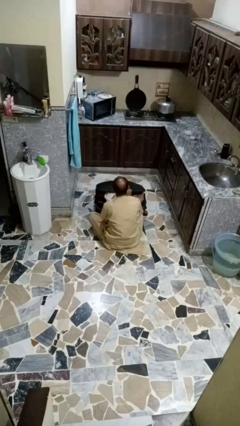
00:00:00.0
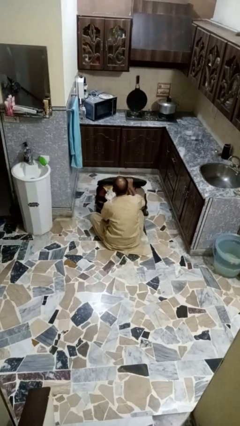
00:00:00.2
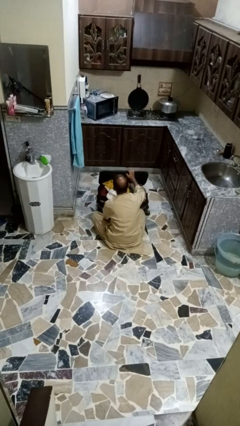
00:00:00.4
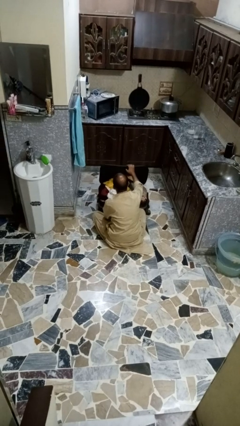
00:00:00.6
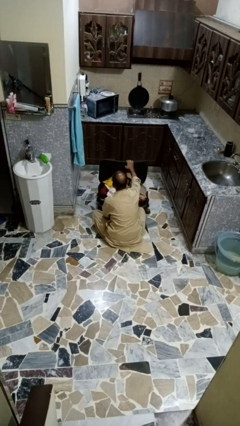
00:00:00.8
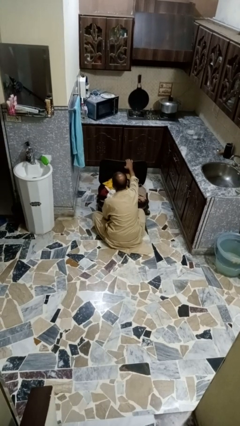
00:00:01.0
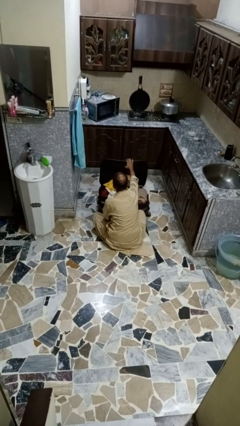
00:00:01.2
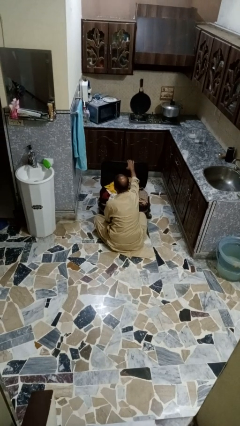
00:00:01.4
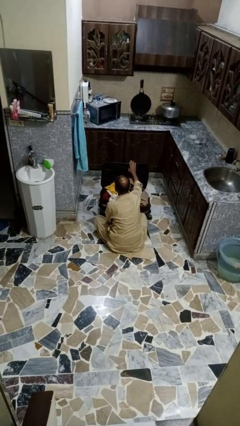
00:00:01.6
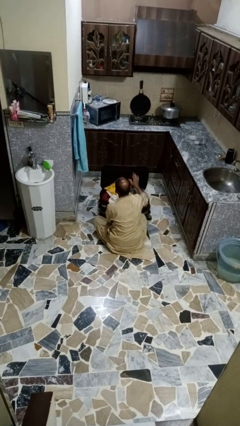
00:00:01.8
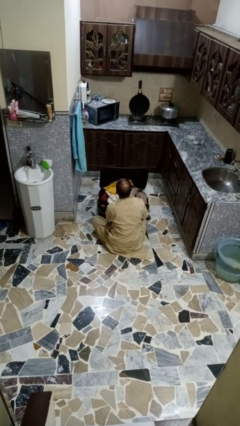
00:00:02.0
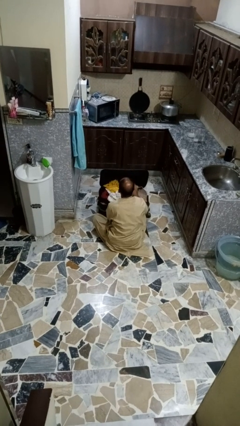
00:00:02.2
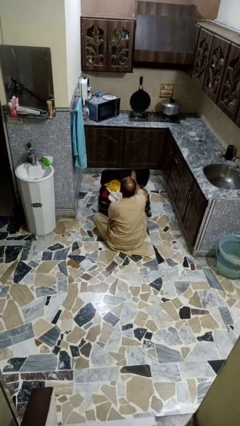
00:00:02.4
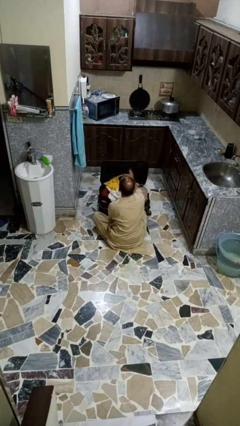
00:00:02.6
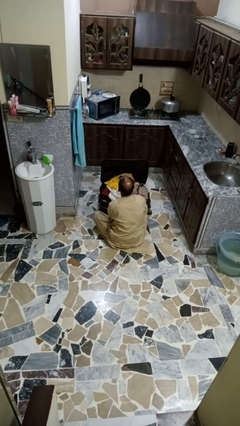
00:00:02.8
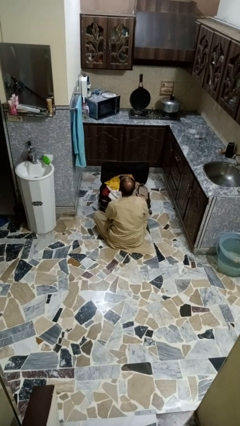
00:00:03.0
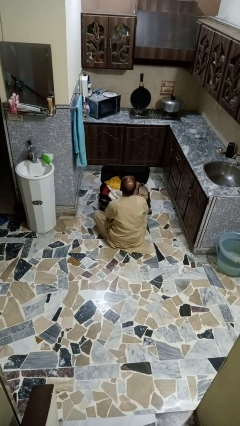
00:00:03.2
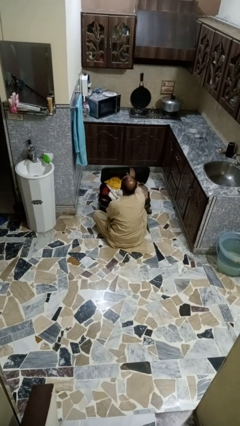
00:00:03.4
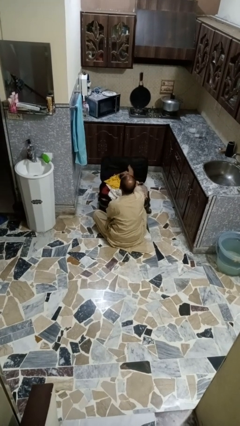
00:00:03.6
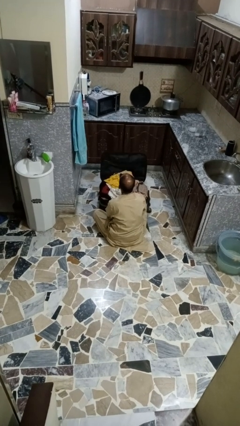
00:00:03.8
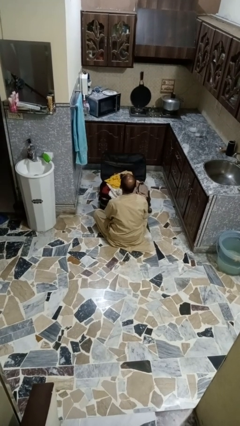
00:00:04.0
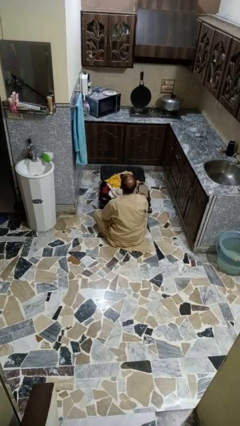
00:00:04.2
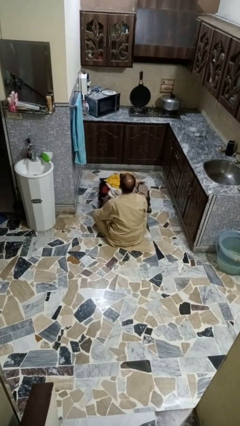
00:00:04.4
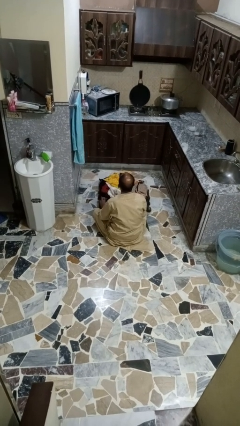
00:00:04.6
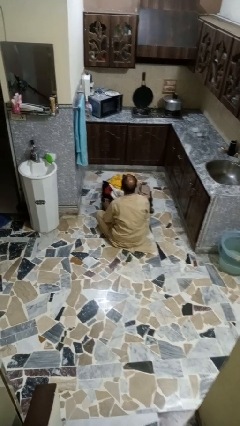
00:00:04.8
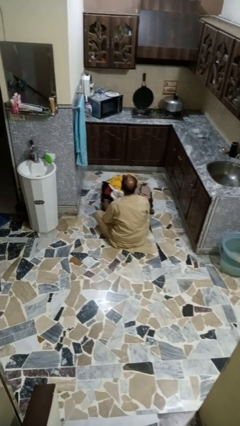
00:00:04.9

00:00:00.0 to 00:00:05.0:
person opens suitcase

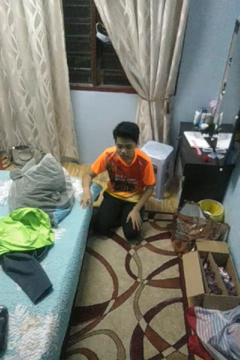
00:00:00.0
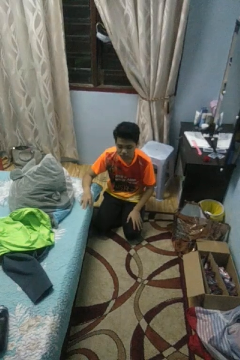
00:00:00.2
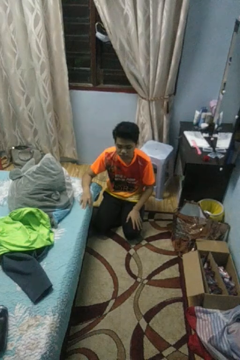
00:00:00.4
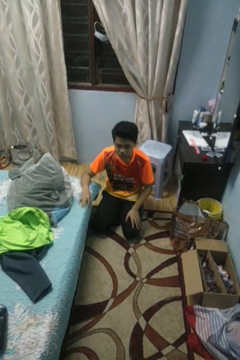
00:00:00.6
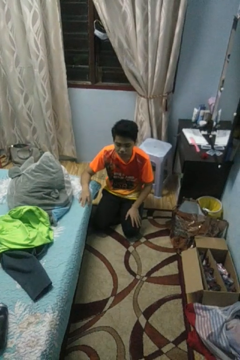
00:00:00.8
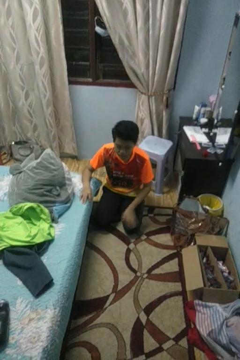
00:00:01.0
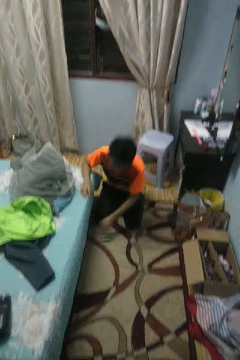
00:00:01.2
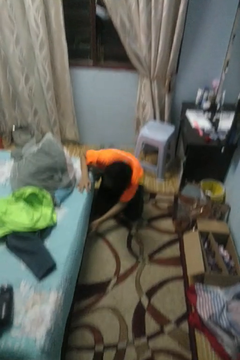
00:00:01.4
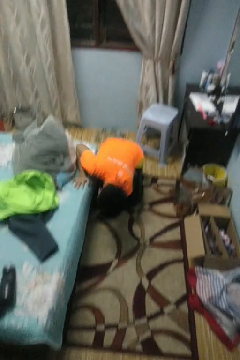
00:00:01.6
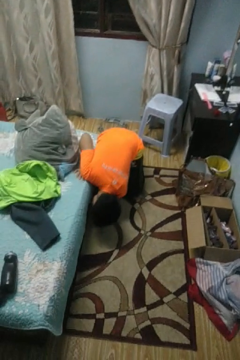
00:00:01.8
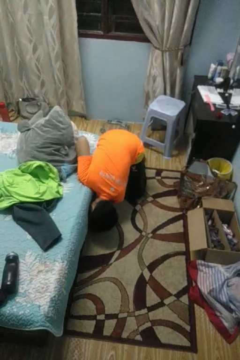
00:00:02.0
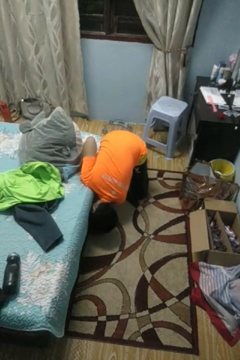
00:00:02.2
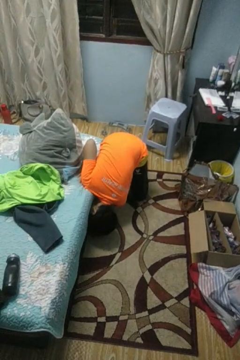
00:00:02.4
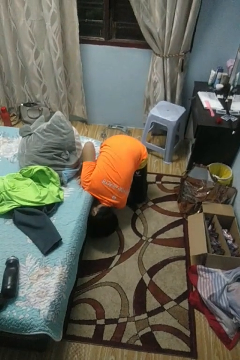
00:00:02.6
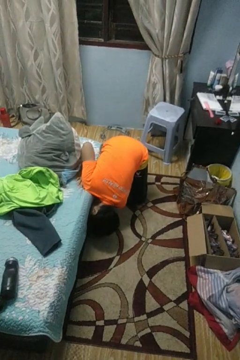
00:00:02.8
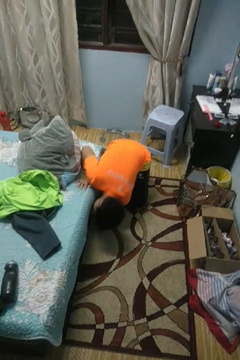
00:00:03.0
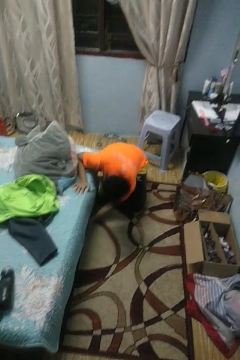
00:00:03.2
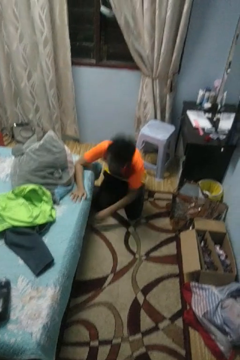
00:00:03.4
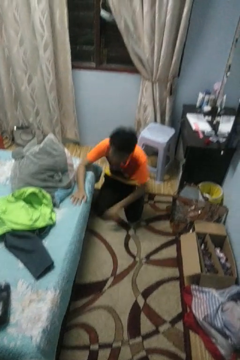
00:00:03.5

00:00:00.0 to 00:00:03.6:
person searches under bed

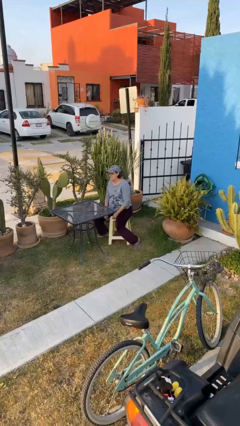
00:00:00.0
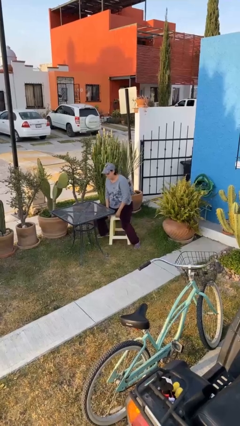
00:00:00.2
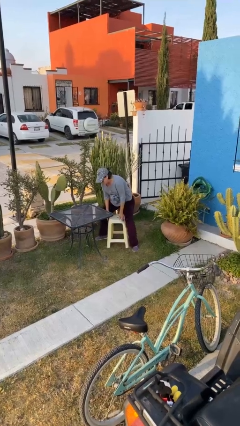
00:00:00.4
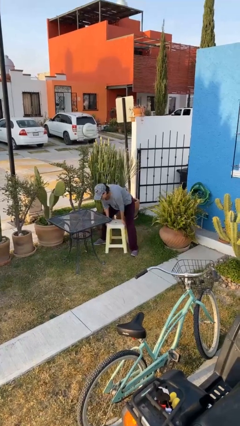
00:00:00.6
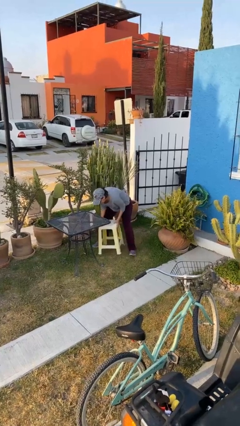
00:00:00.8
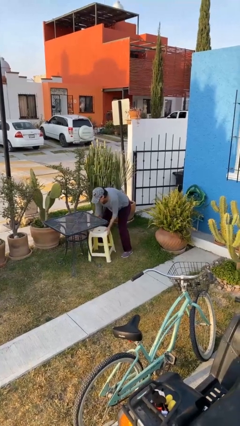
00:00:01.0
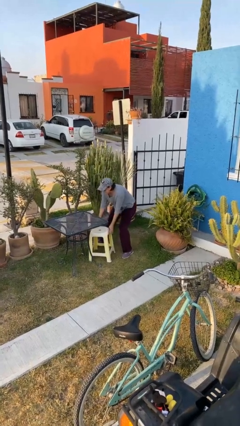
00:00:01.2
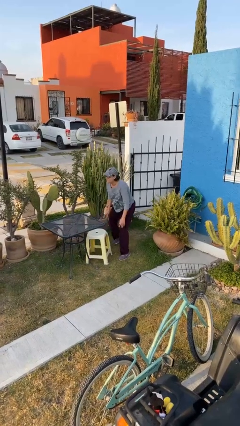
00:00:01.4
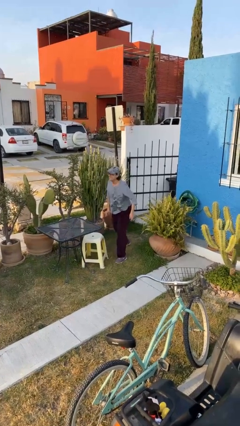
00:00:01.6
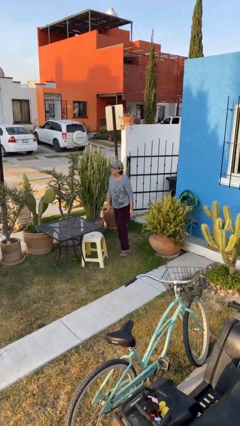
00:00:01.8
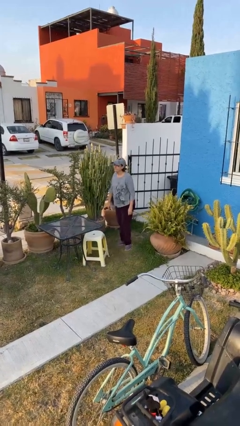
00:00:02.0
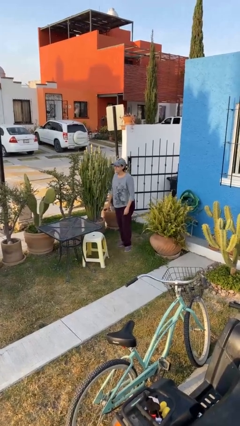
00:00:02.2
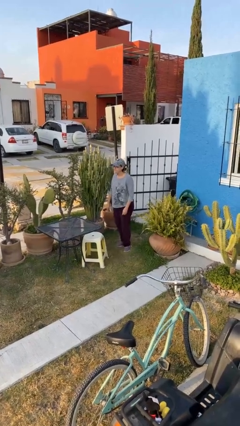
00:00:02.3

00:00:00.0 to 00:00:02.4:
person stands up

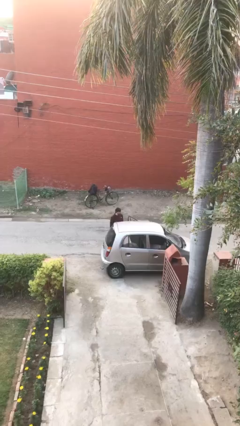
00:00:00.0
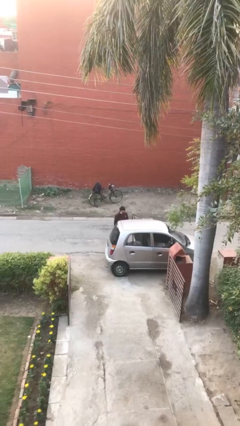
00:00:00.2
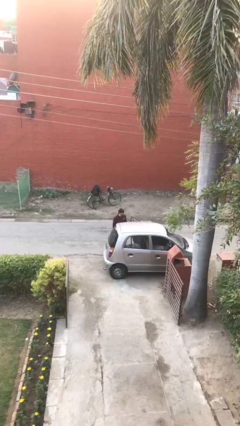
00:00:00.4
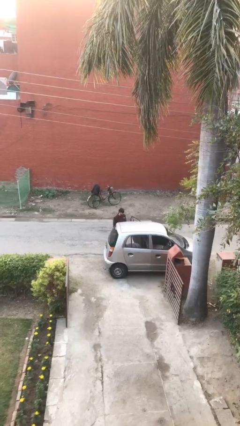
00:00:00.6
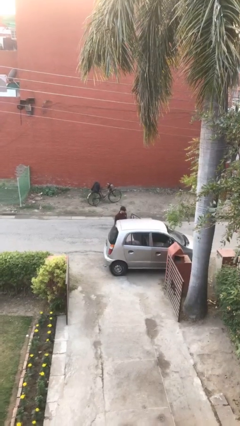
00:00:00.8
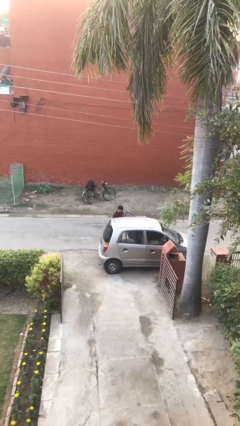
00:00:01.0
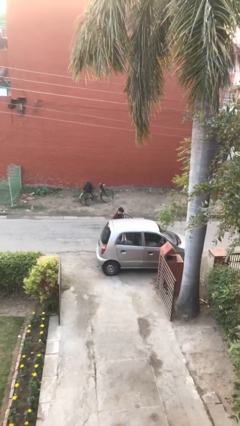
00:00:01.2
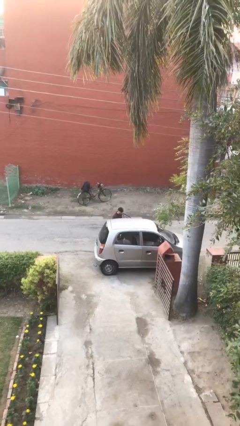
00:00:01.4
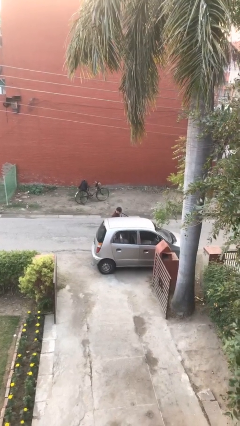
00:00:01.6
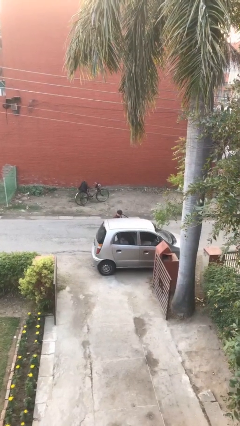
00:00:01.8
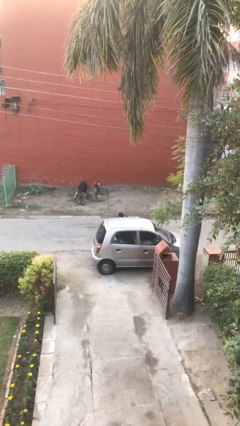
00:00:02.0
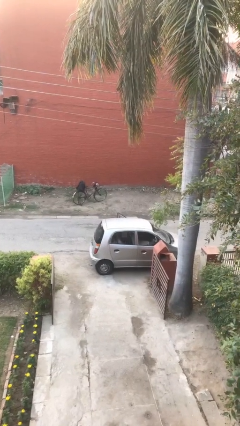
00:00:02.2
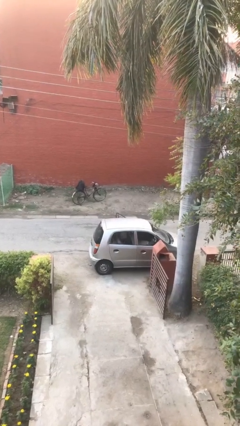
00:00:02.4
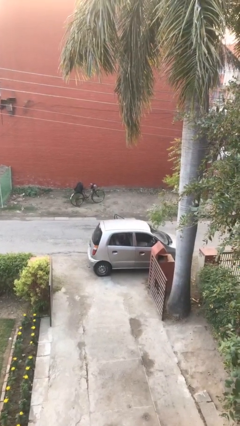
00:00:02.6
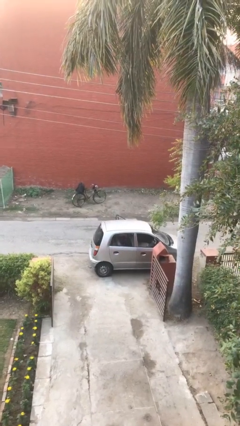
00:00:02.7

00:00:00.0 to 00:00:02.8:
person enters car

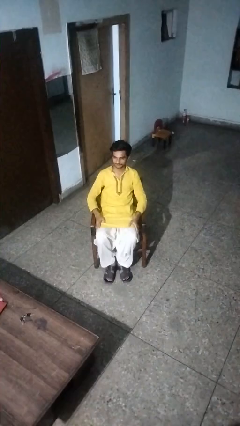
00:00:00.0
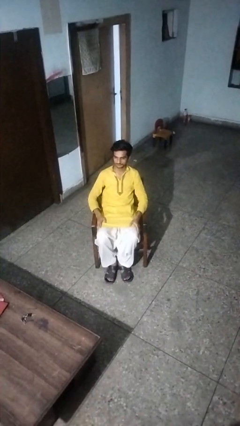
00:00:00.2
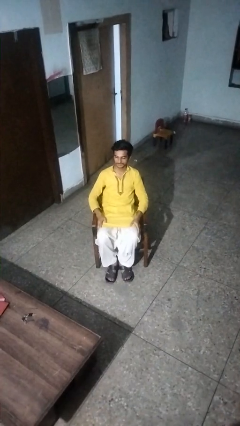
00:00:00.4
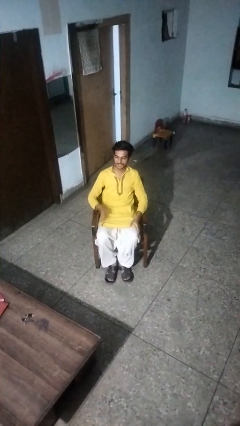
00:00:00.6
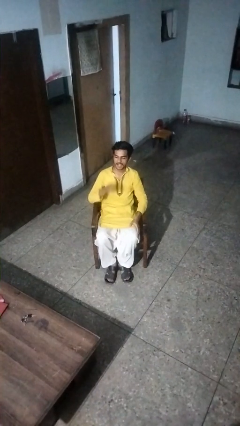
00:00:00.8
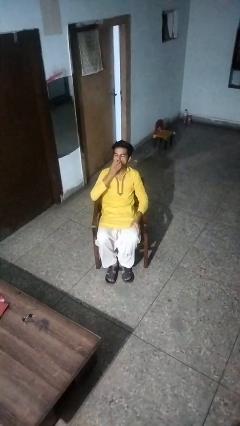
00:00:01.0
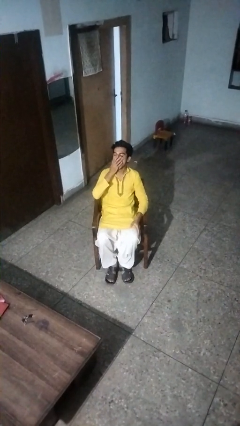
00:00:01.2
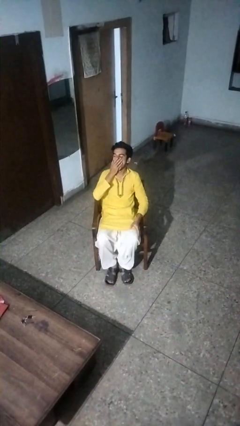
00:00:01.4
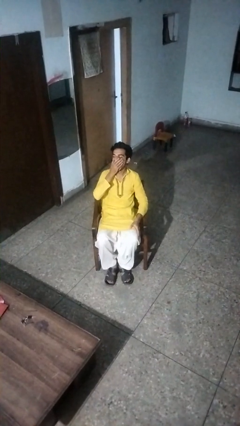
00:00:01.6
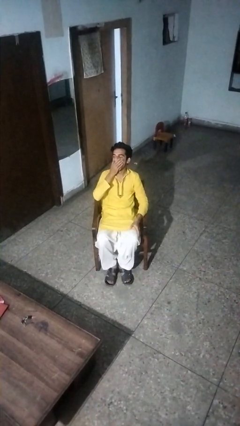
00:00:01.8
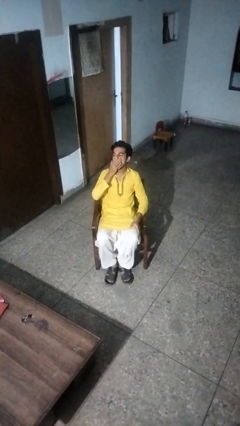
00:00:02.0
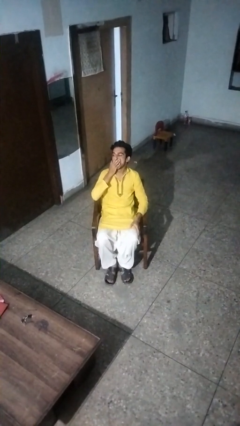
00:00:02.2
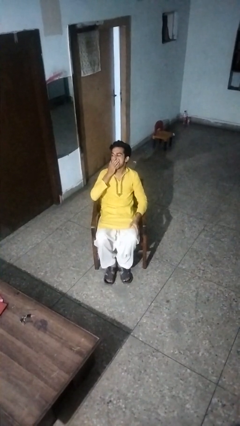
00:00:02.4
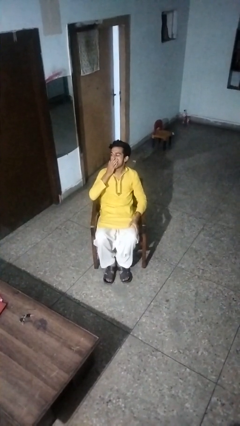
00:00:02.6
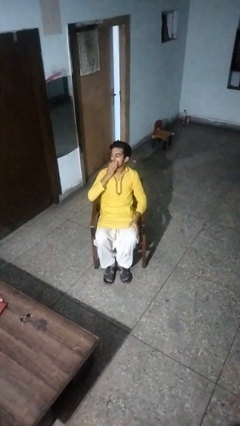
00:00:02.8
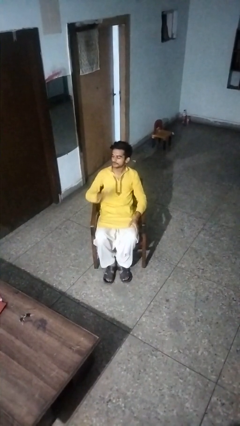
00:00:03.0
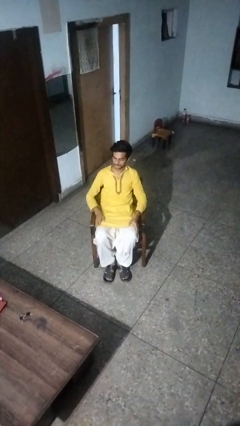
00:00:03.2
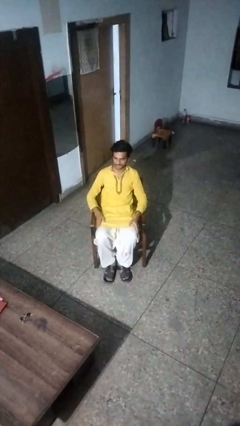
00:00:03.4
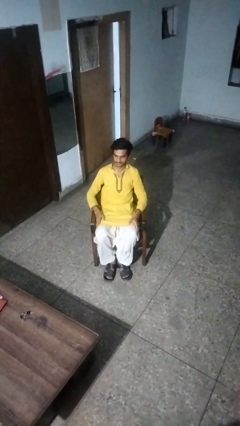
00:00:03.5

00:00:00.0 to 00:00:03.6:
person yawns

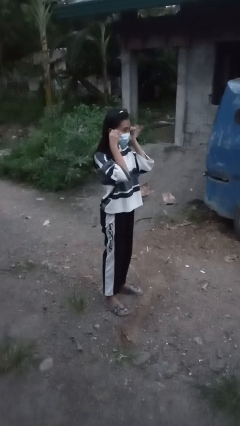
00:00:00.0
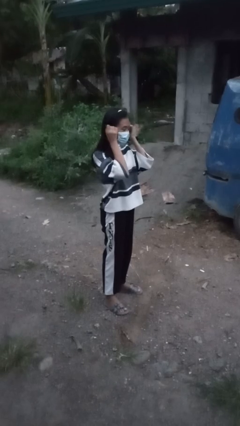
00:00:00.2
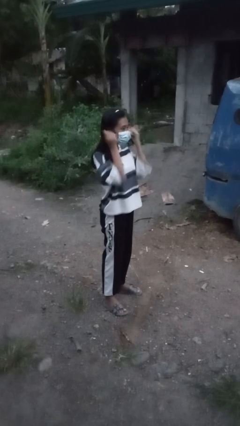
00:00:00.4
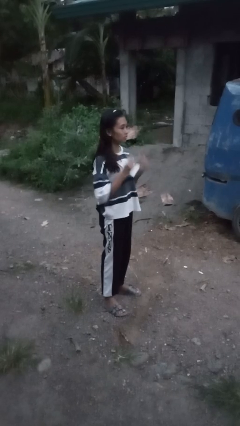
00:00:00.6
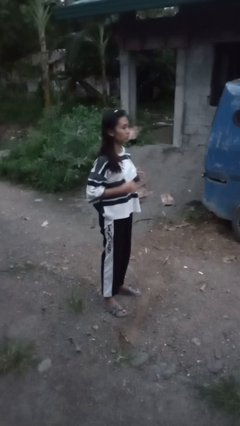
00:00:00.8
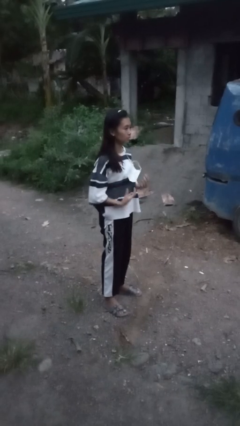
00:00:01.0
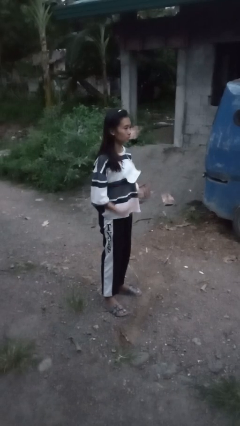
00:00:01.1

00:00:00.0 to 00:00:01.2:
person takes off facemask
